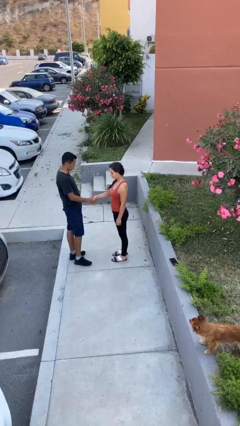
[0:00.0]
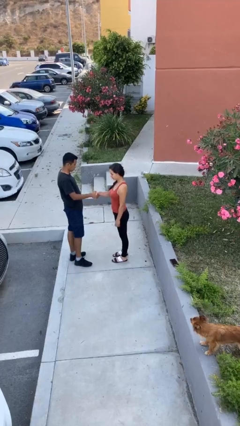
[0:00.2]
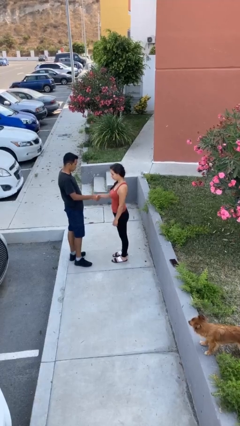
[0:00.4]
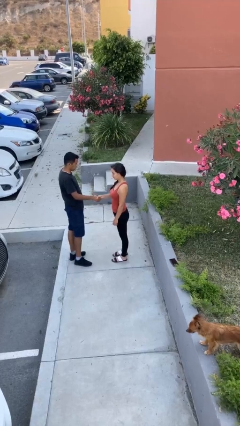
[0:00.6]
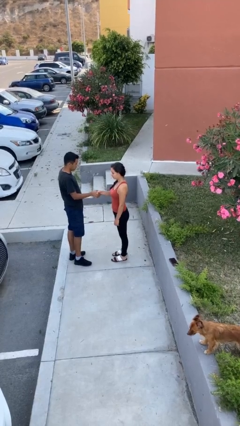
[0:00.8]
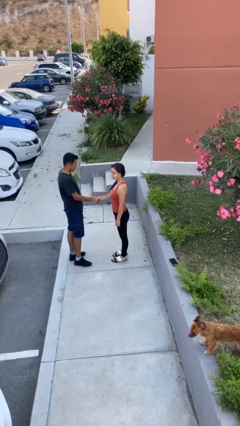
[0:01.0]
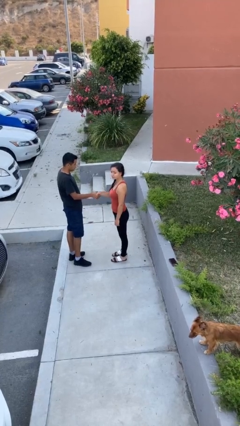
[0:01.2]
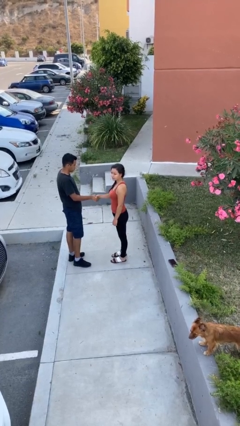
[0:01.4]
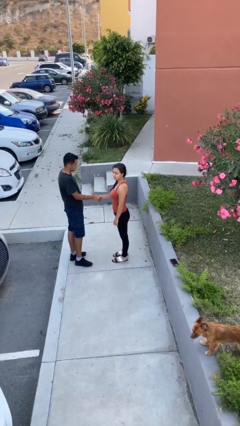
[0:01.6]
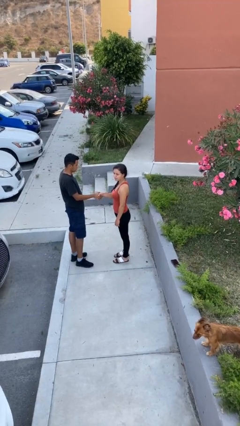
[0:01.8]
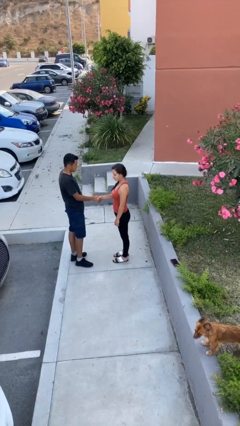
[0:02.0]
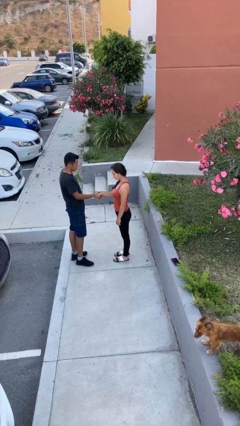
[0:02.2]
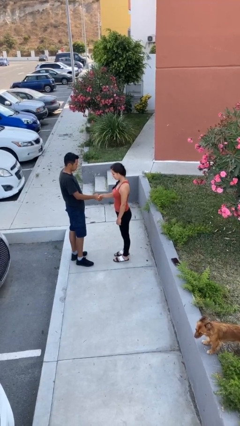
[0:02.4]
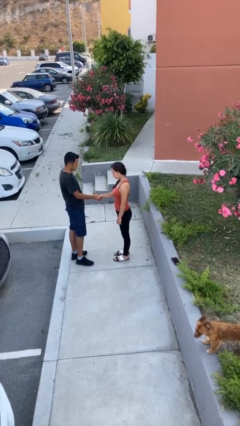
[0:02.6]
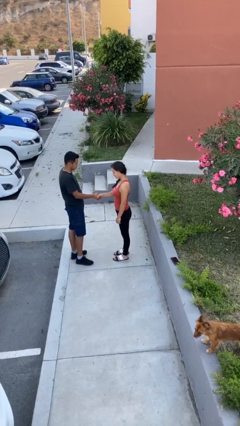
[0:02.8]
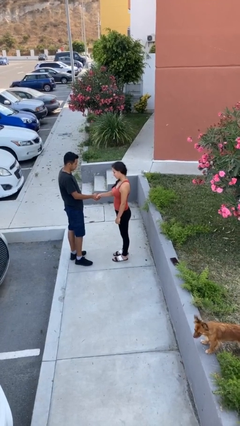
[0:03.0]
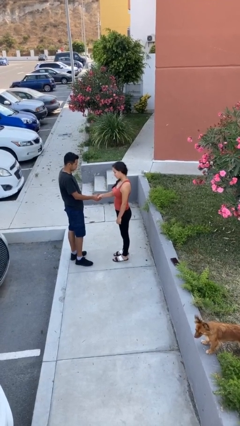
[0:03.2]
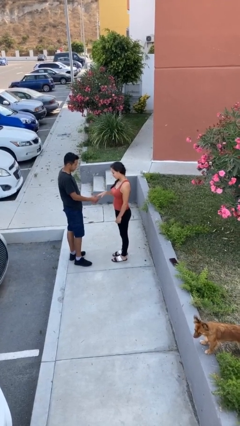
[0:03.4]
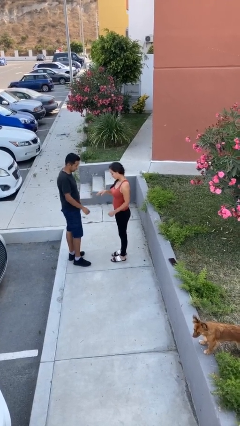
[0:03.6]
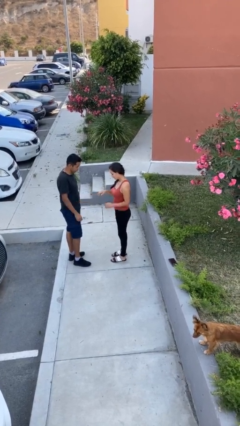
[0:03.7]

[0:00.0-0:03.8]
person shakes hand

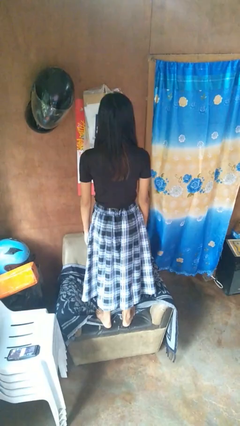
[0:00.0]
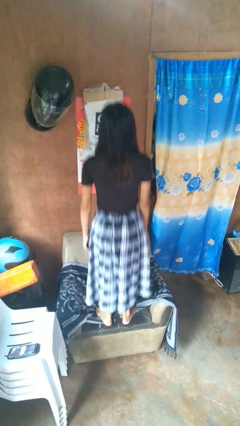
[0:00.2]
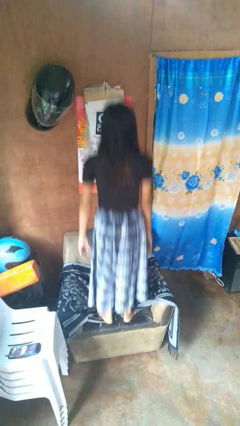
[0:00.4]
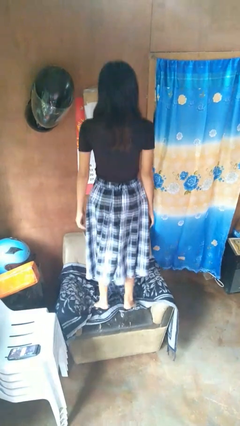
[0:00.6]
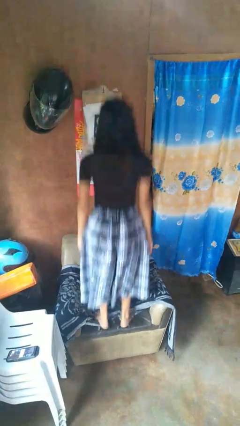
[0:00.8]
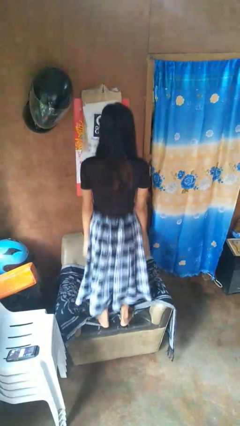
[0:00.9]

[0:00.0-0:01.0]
person jumps on couch

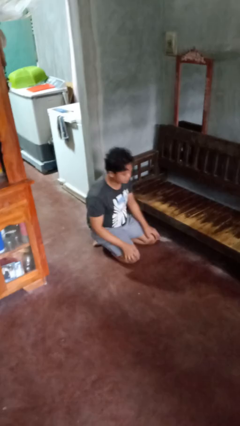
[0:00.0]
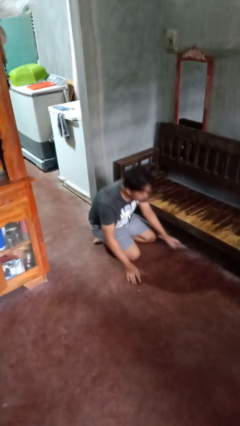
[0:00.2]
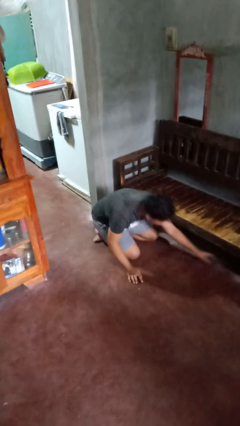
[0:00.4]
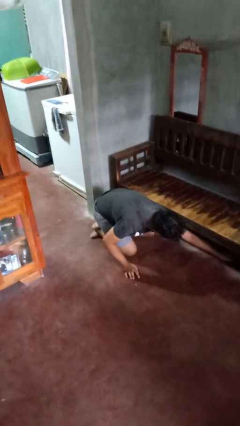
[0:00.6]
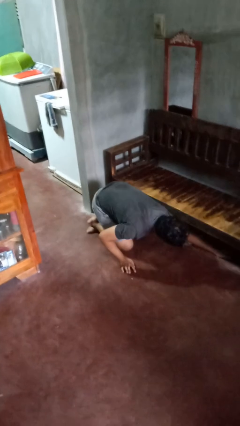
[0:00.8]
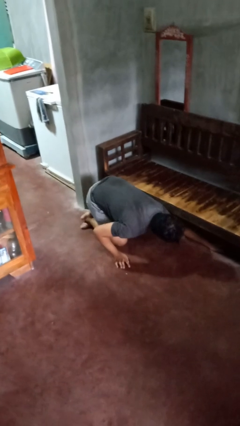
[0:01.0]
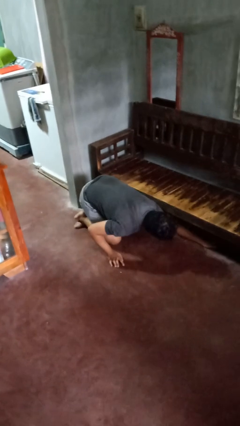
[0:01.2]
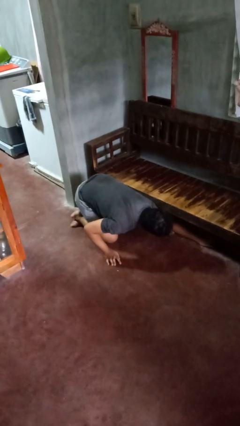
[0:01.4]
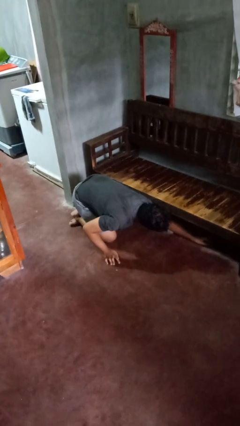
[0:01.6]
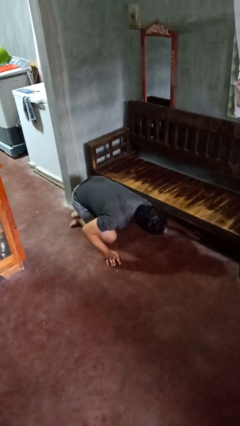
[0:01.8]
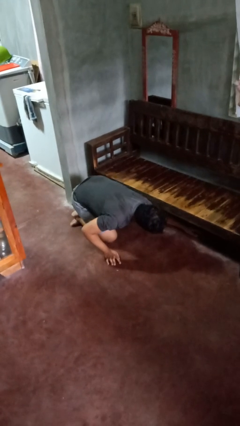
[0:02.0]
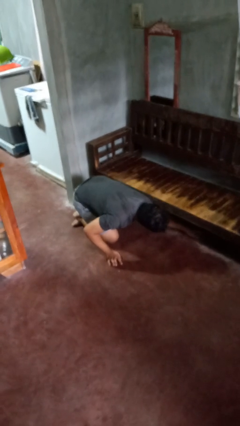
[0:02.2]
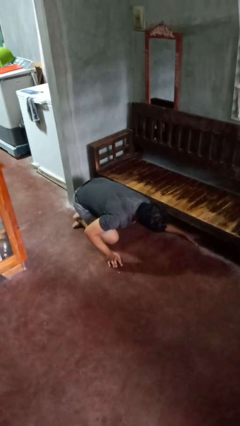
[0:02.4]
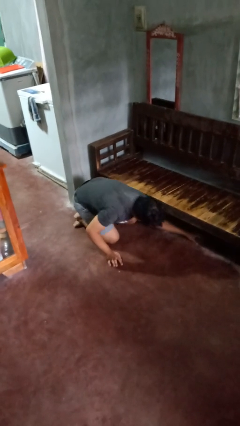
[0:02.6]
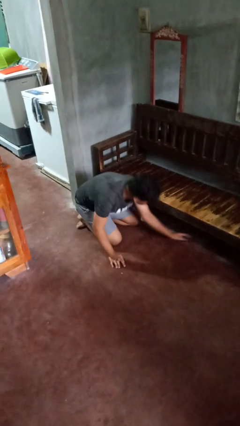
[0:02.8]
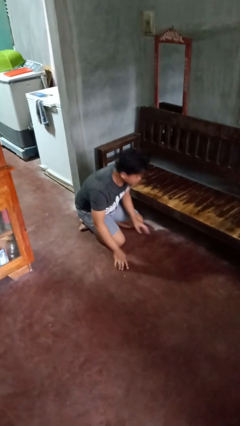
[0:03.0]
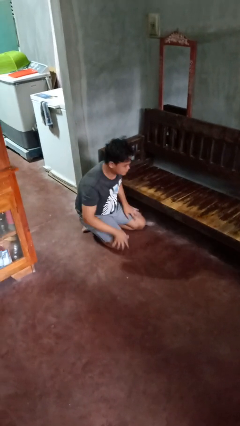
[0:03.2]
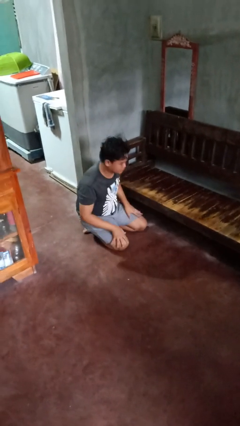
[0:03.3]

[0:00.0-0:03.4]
person searches under couch

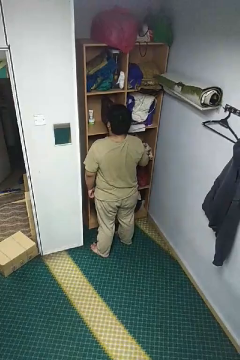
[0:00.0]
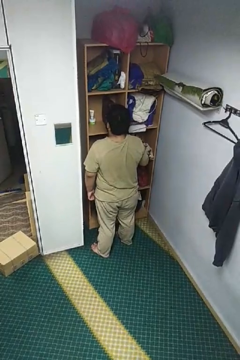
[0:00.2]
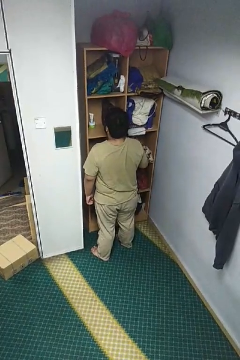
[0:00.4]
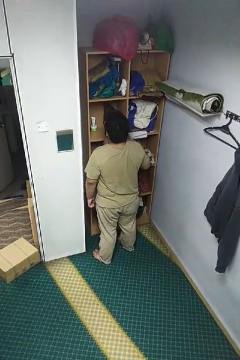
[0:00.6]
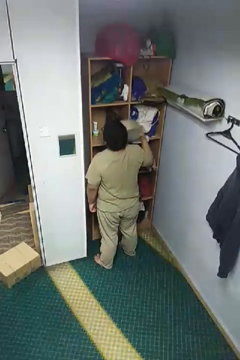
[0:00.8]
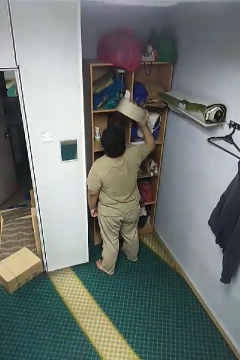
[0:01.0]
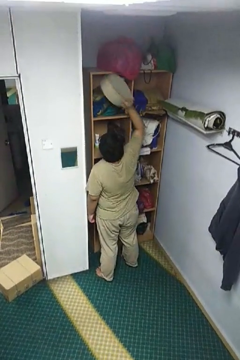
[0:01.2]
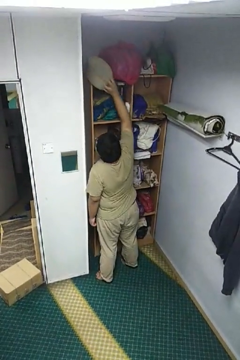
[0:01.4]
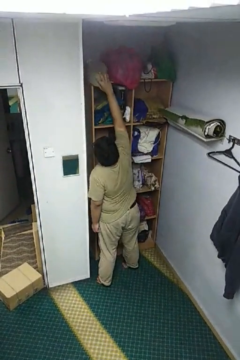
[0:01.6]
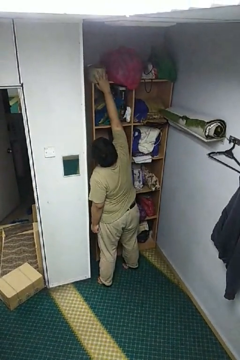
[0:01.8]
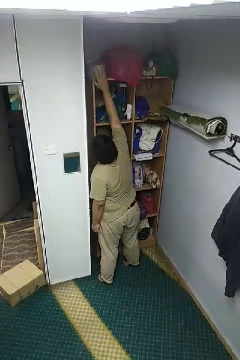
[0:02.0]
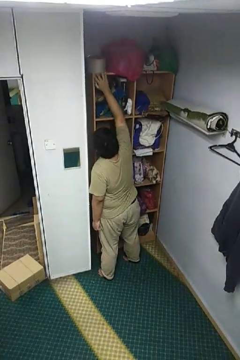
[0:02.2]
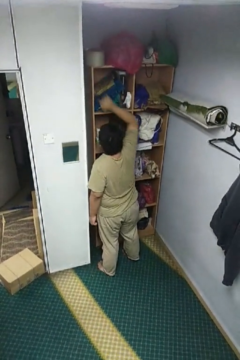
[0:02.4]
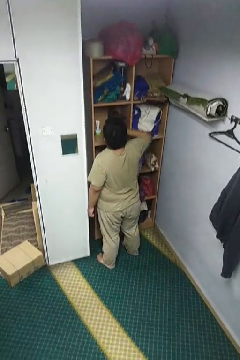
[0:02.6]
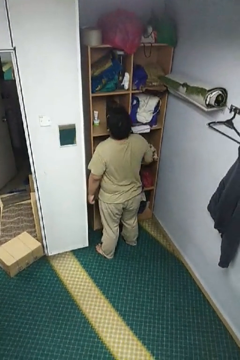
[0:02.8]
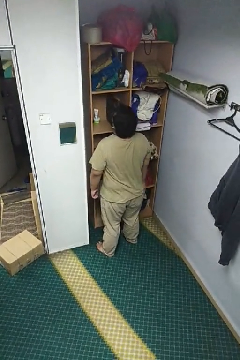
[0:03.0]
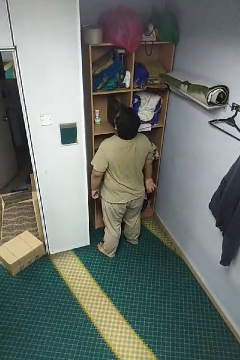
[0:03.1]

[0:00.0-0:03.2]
person puts down object on shelf

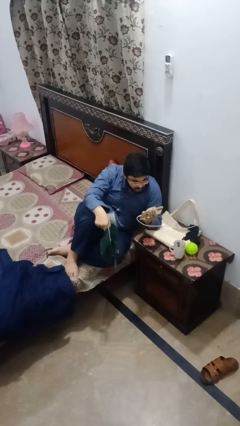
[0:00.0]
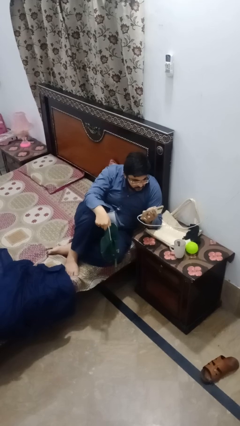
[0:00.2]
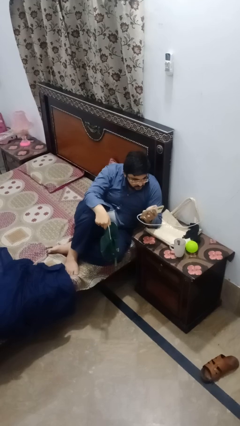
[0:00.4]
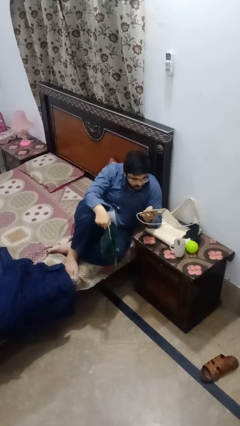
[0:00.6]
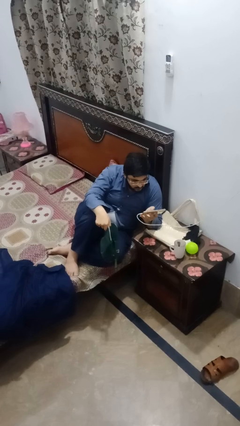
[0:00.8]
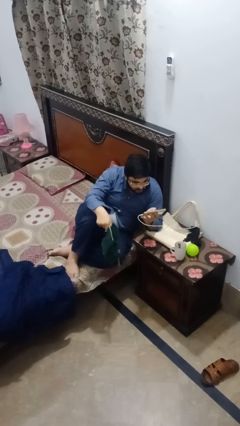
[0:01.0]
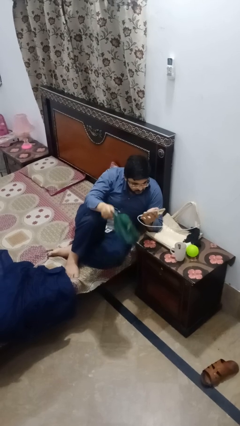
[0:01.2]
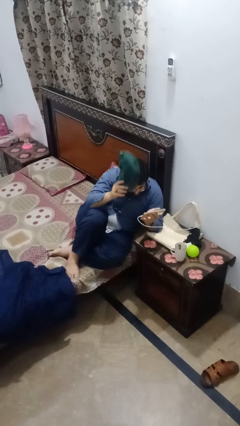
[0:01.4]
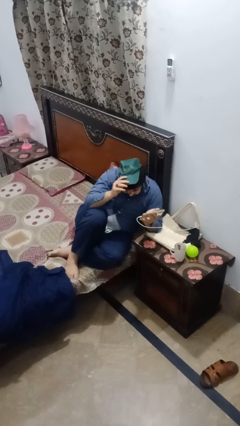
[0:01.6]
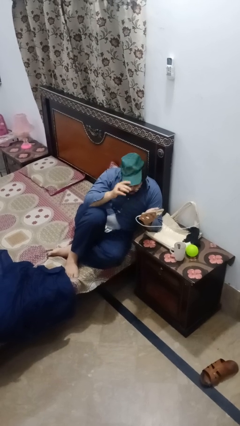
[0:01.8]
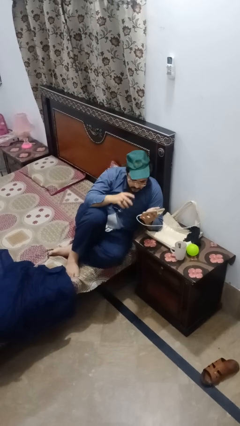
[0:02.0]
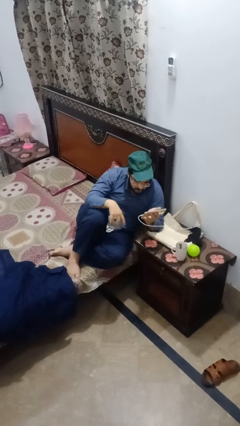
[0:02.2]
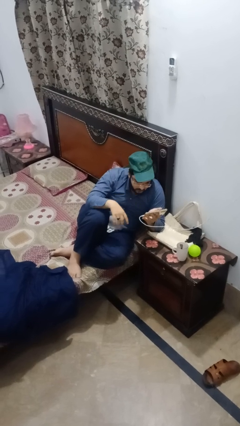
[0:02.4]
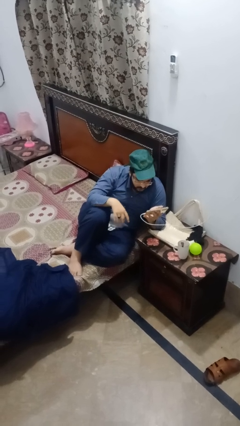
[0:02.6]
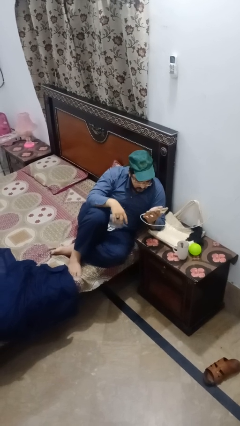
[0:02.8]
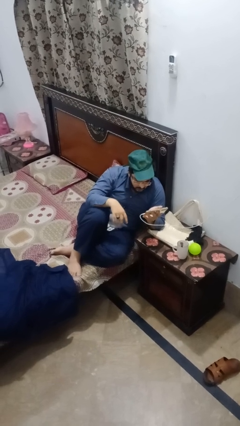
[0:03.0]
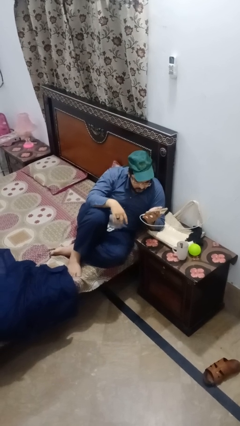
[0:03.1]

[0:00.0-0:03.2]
person puts on hat

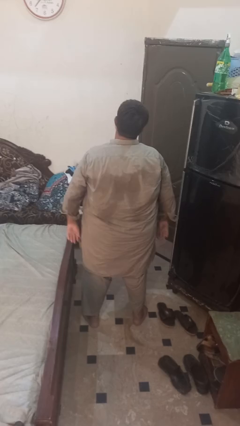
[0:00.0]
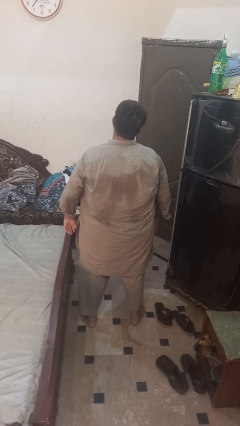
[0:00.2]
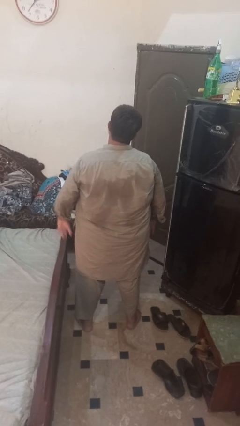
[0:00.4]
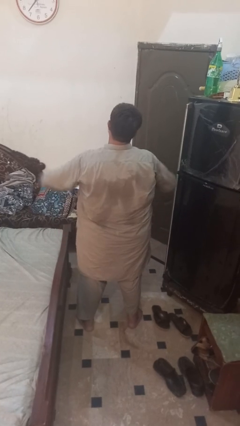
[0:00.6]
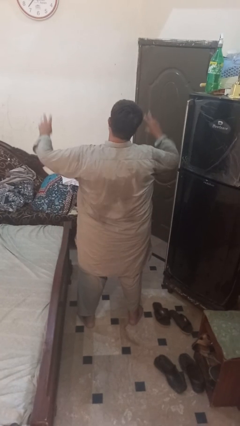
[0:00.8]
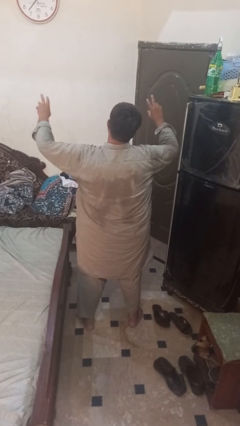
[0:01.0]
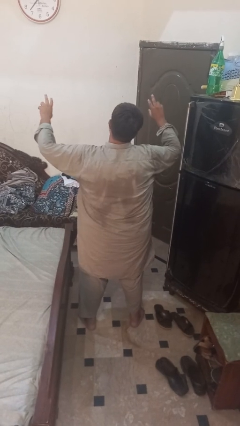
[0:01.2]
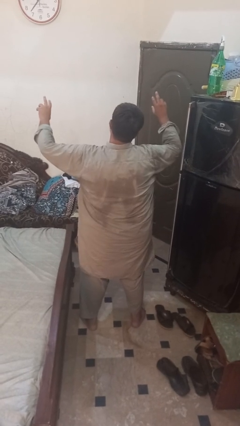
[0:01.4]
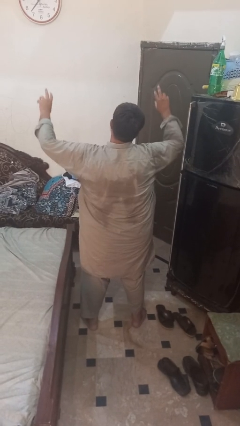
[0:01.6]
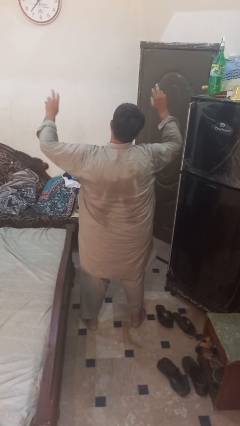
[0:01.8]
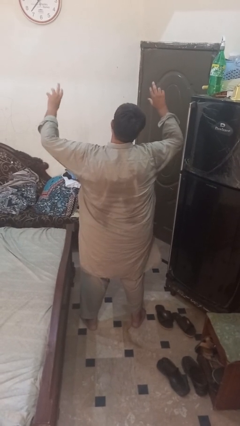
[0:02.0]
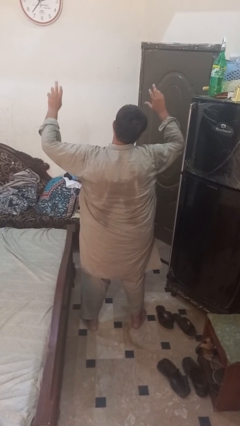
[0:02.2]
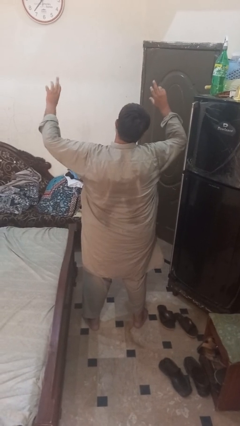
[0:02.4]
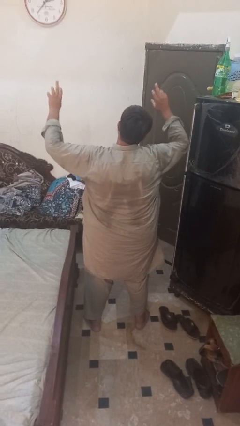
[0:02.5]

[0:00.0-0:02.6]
person dances in place

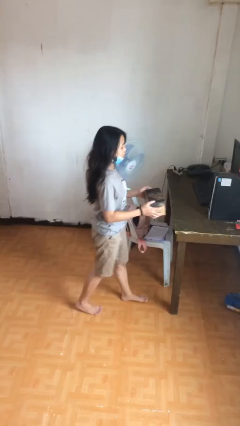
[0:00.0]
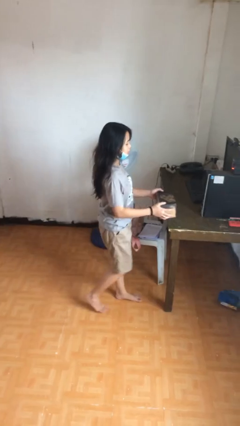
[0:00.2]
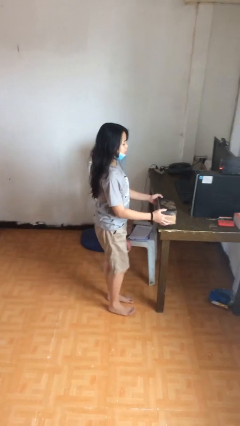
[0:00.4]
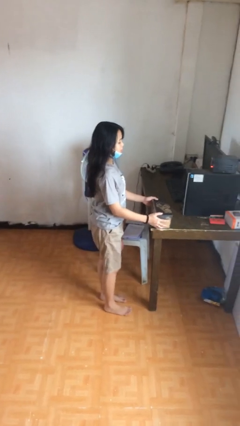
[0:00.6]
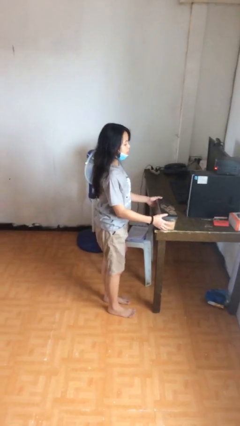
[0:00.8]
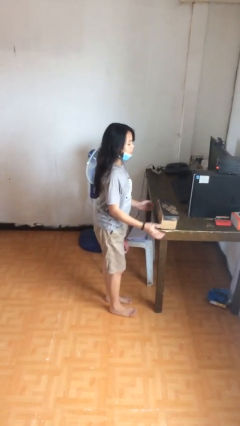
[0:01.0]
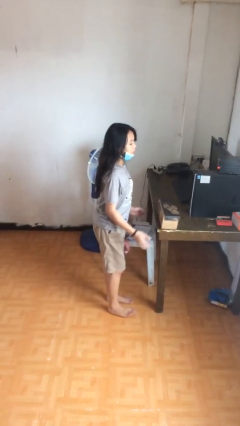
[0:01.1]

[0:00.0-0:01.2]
person puts down object on table
